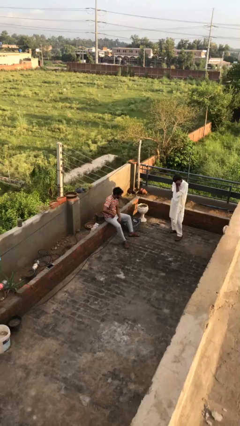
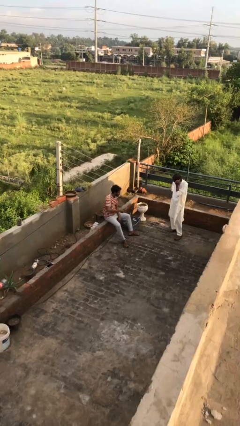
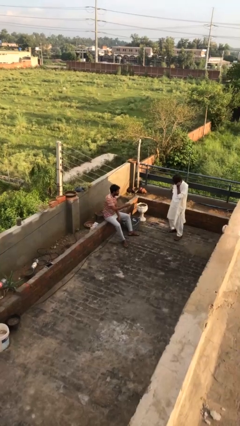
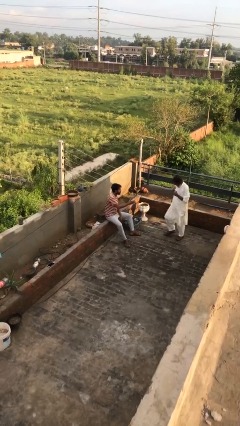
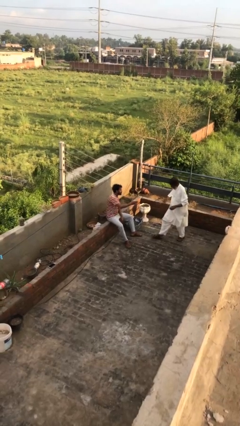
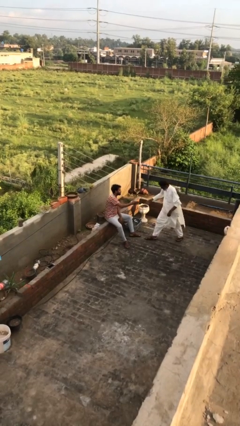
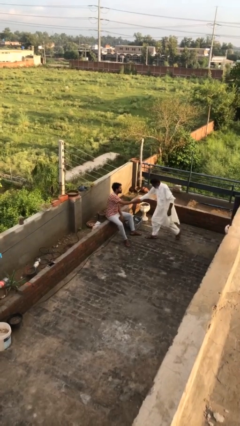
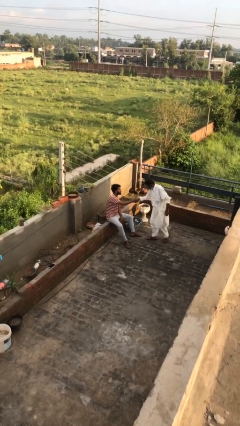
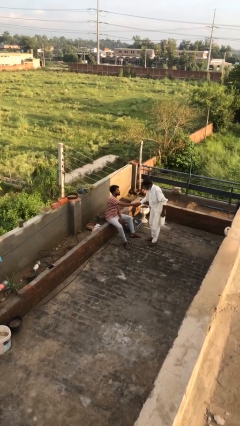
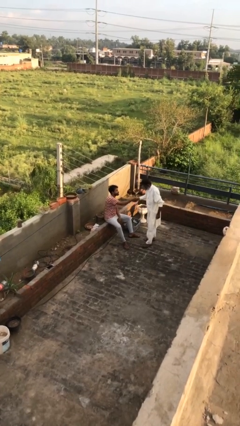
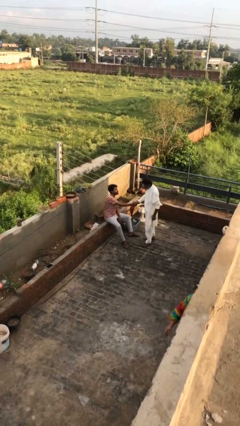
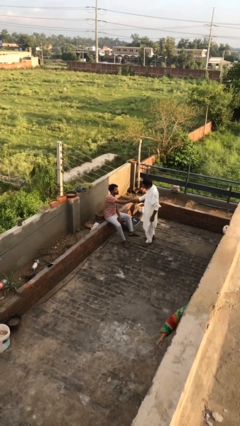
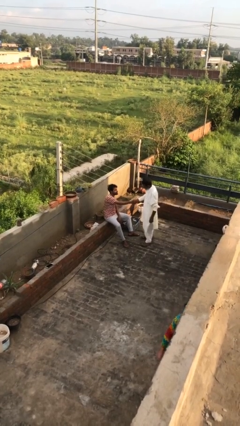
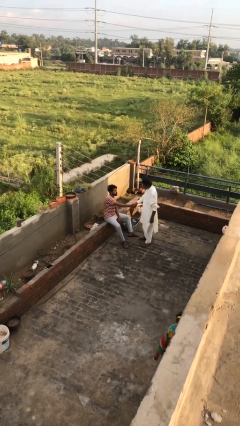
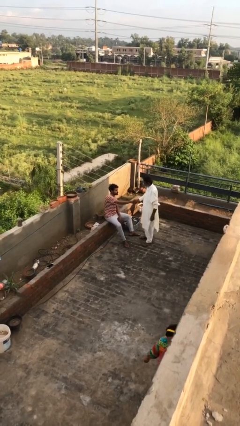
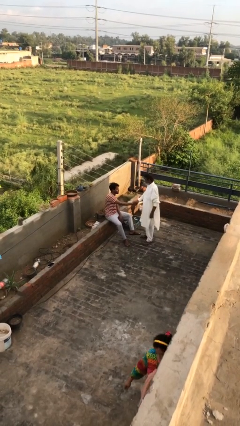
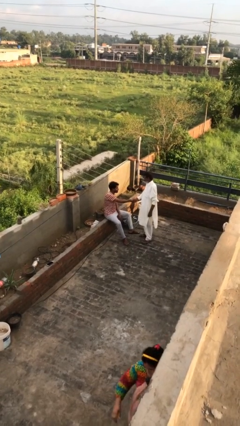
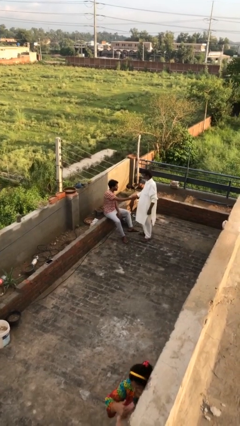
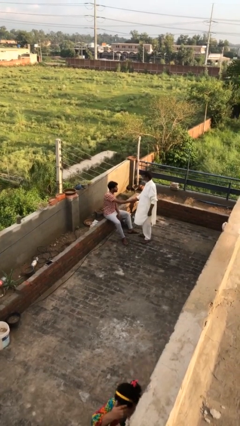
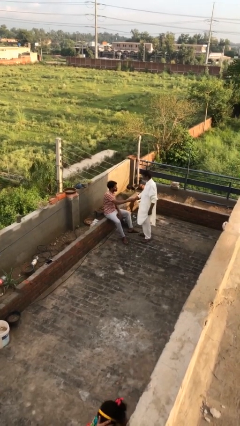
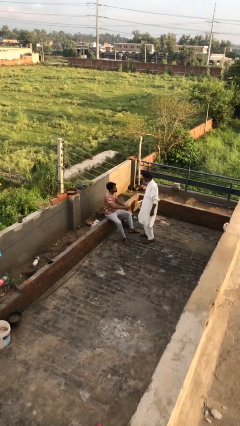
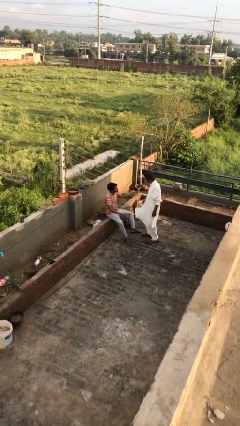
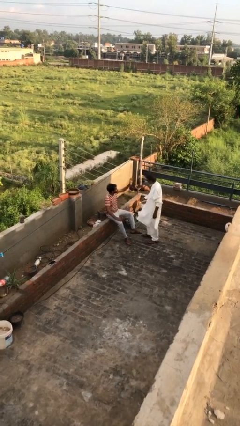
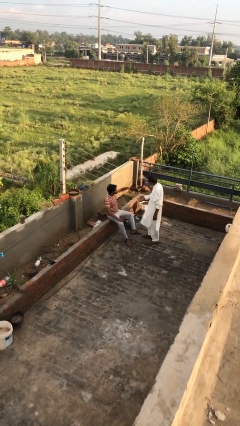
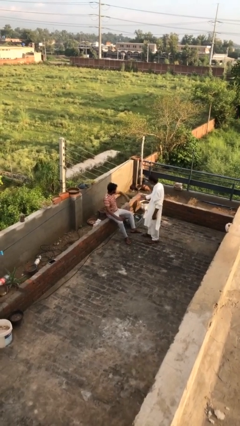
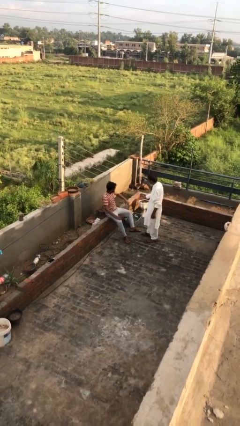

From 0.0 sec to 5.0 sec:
person shakes hand

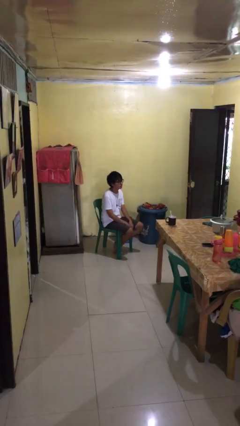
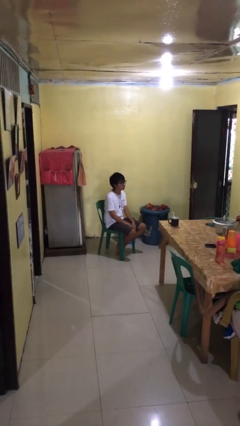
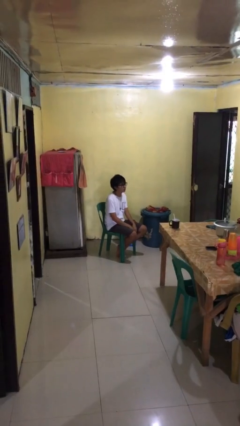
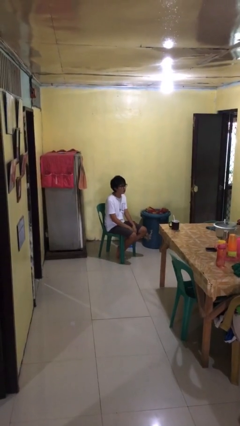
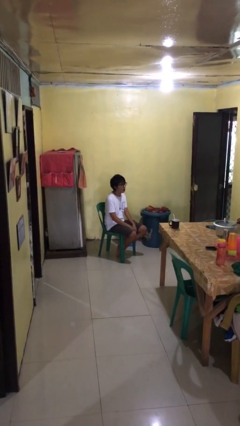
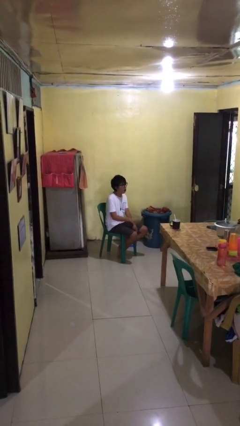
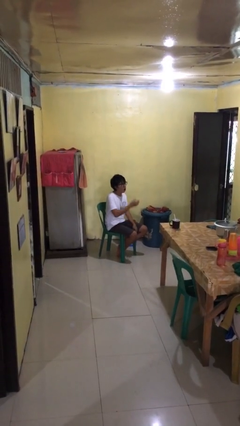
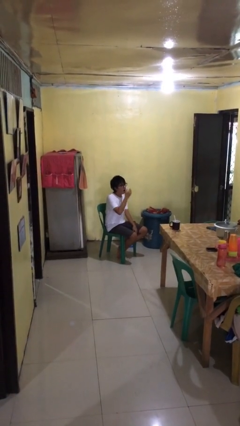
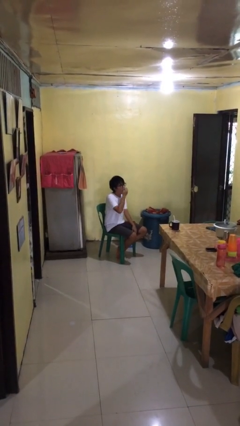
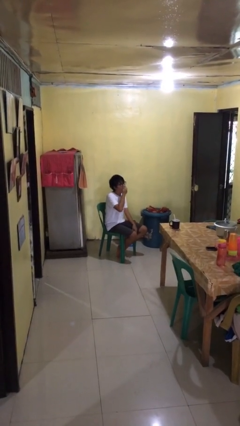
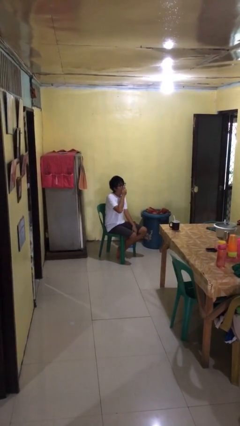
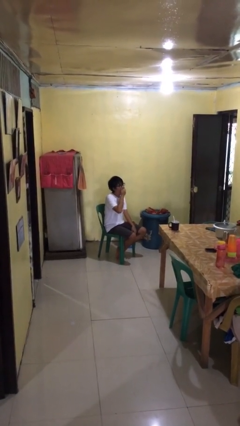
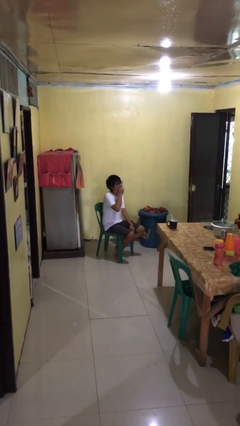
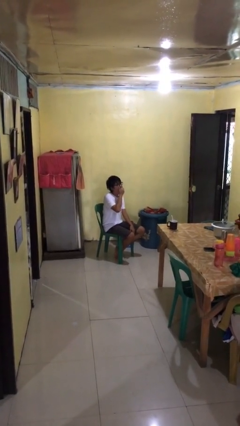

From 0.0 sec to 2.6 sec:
person yawns

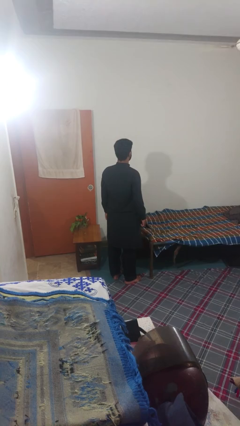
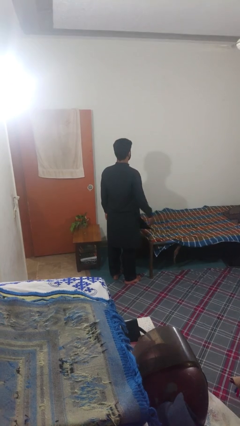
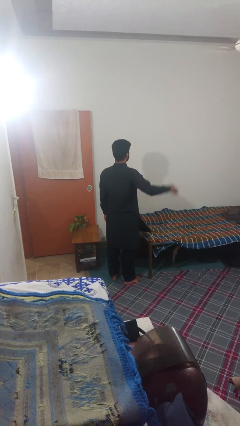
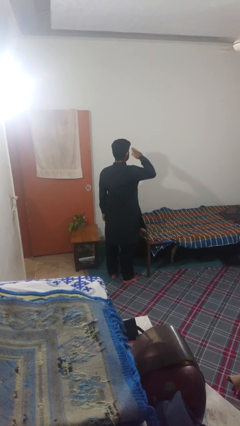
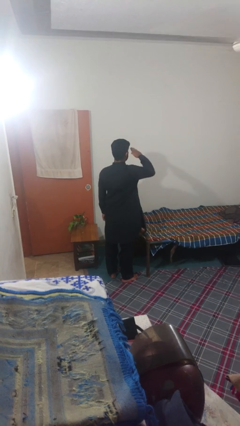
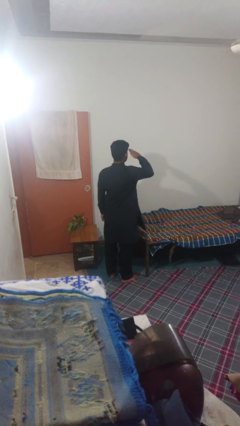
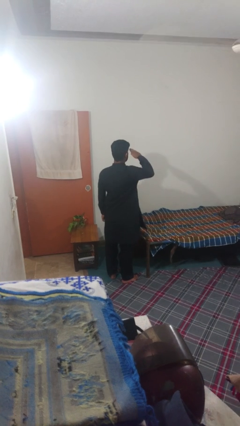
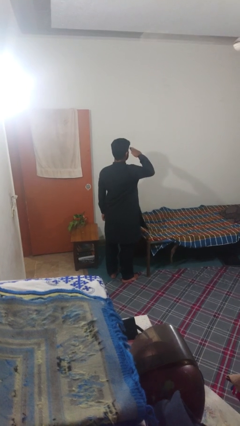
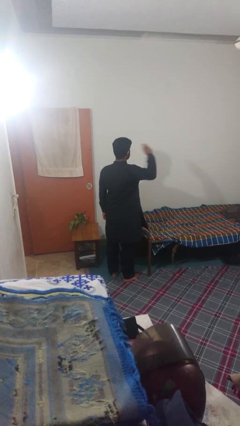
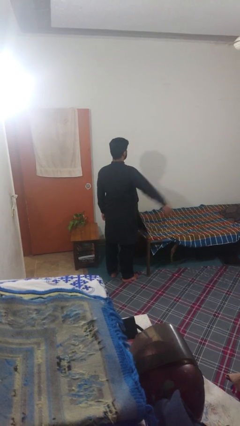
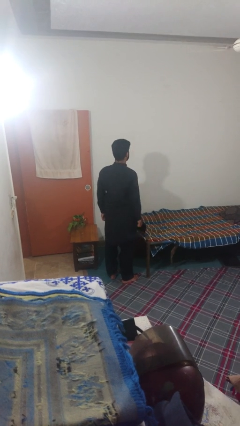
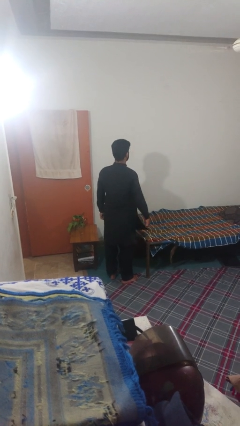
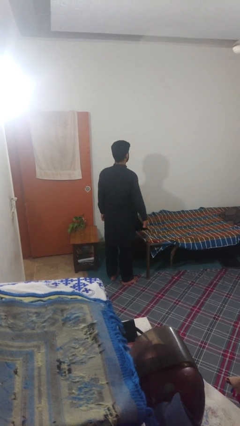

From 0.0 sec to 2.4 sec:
person salutes

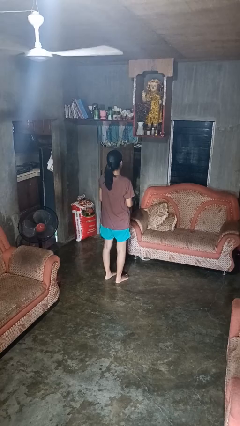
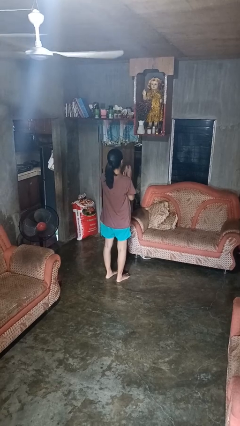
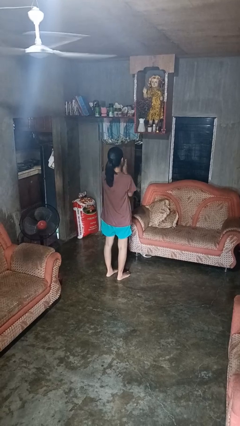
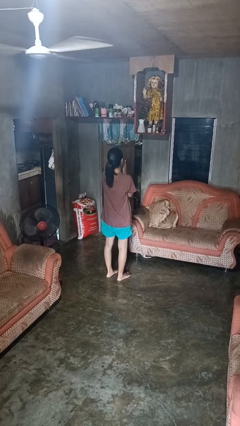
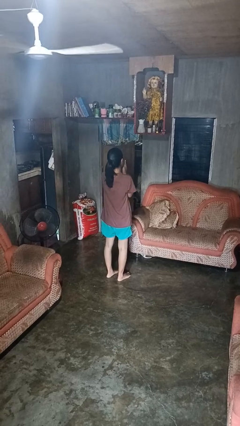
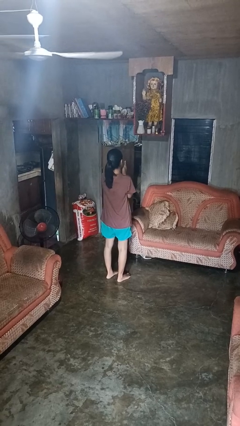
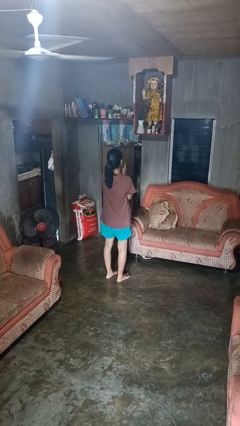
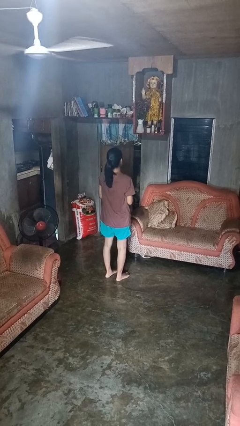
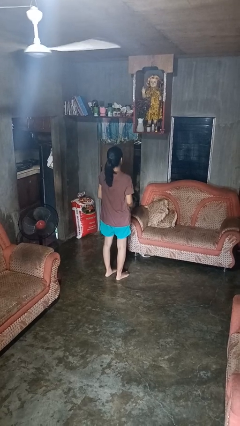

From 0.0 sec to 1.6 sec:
person prays

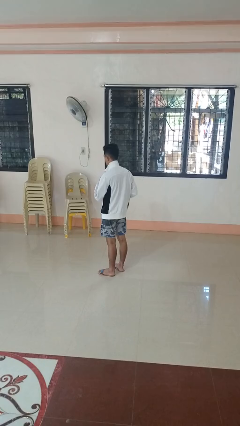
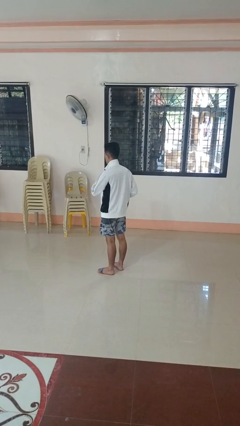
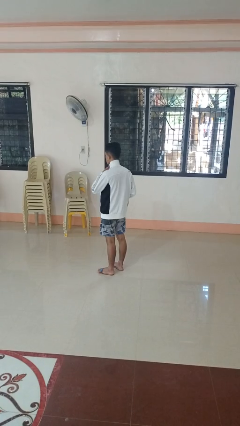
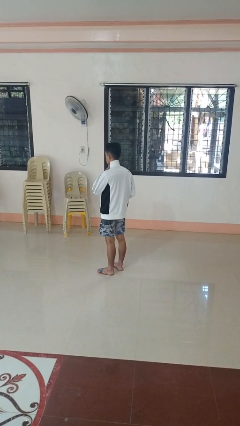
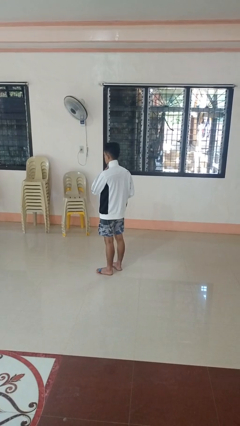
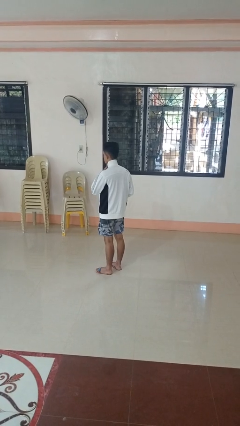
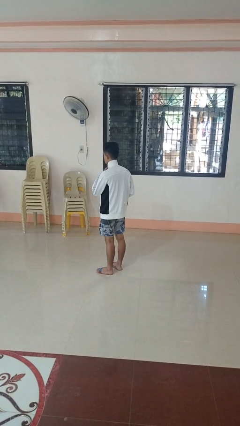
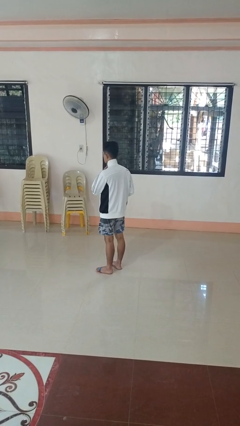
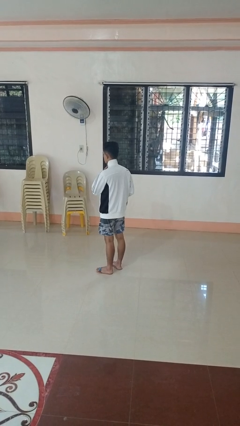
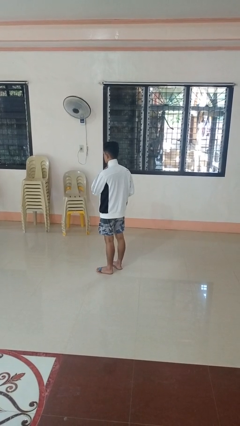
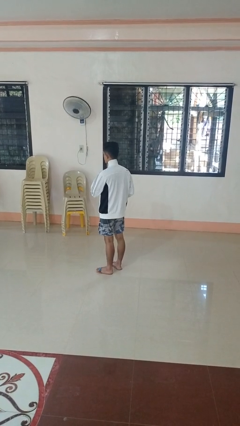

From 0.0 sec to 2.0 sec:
person zips up jacket

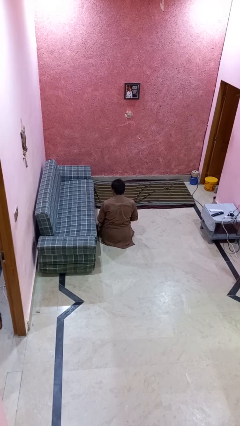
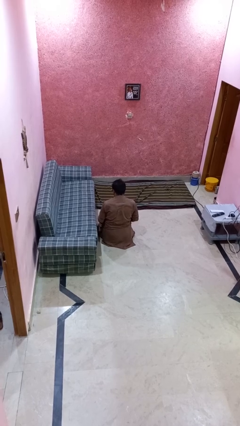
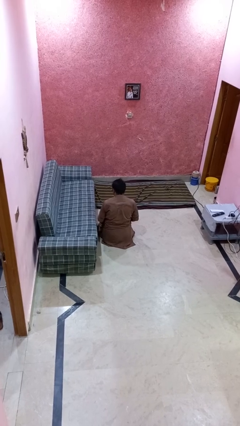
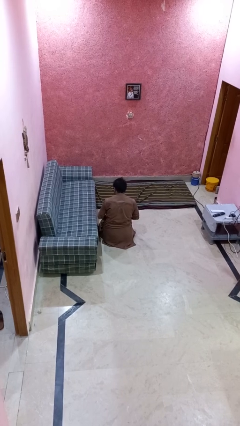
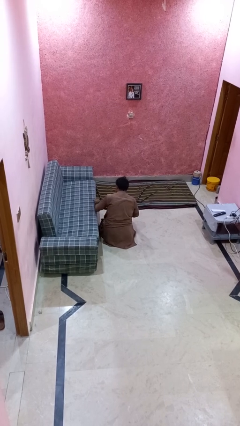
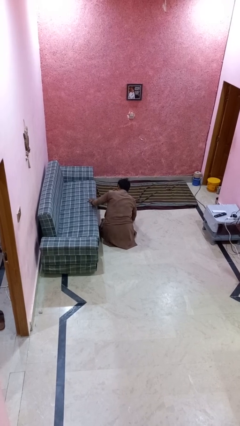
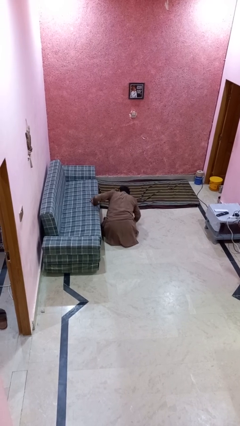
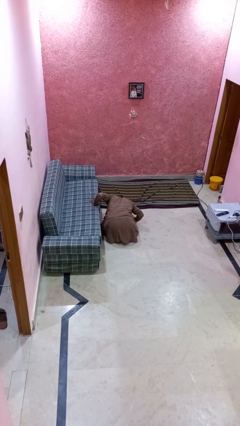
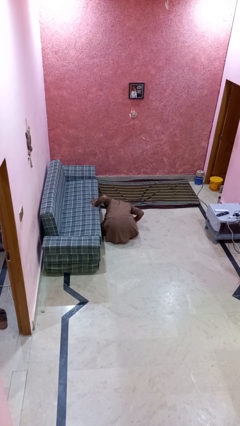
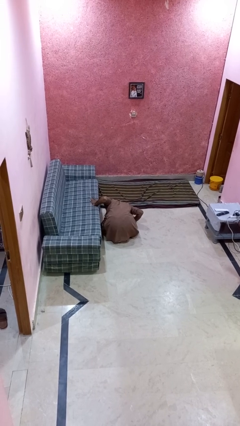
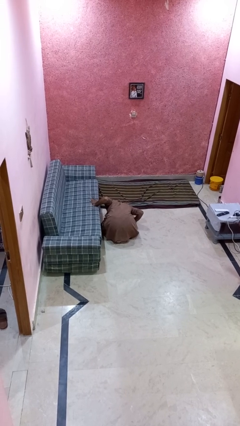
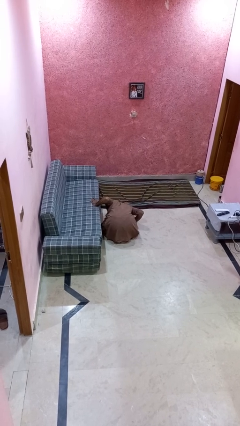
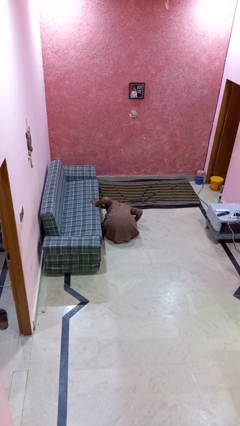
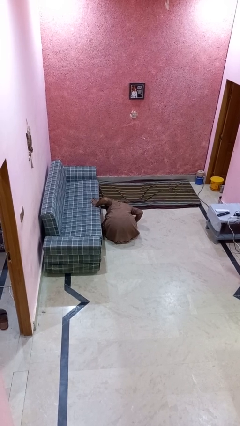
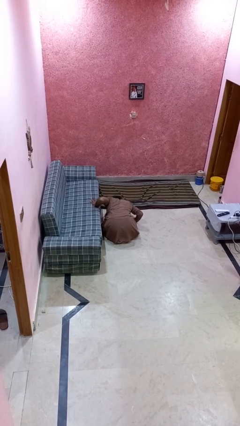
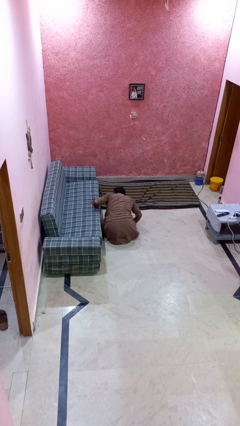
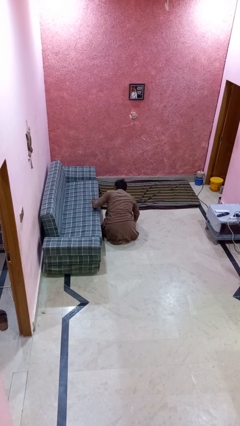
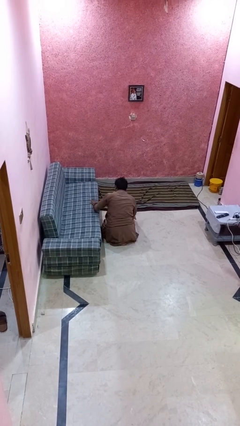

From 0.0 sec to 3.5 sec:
person searches under couch
